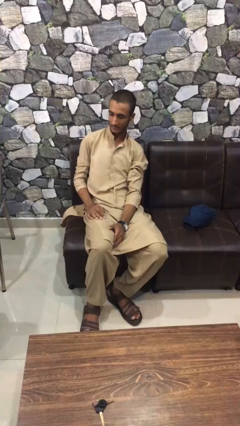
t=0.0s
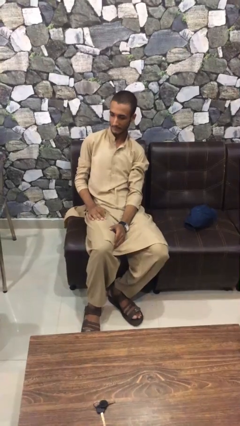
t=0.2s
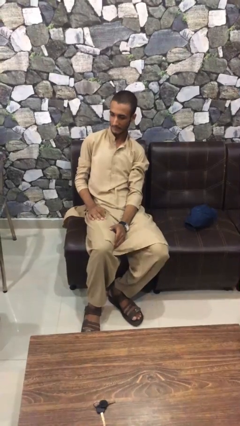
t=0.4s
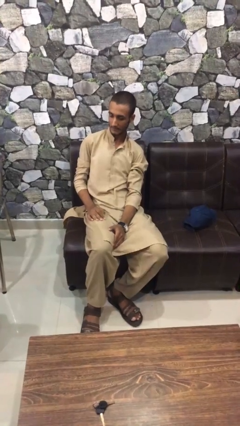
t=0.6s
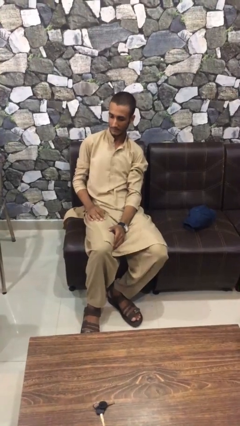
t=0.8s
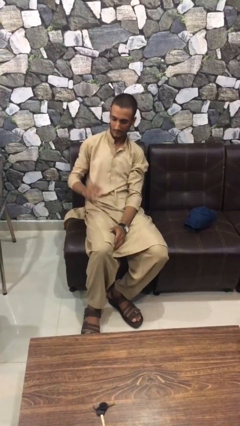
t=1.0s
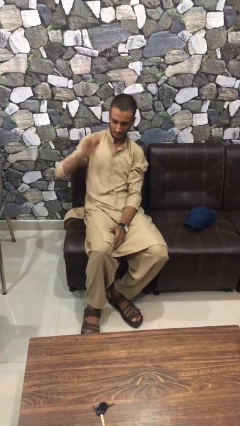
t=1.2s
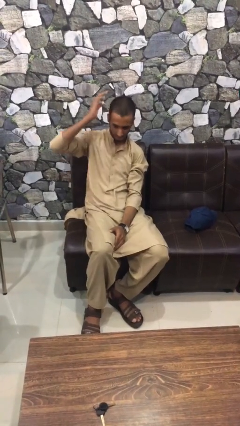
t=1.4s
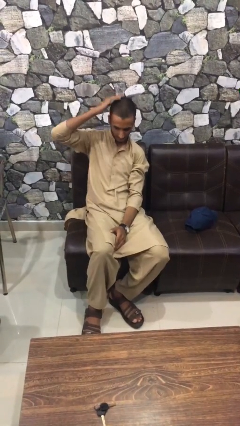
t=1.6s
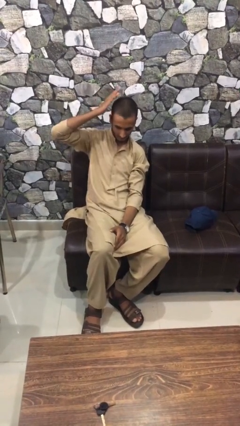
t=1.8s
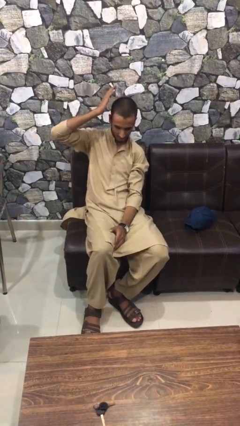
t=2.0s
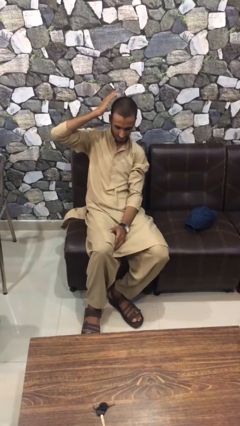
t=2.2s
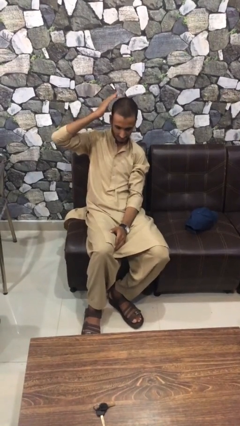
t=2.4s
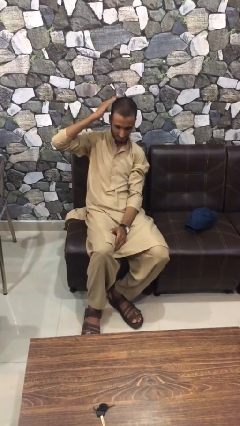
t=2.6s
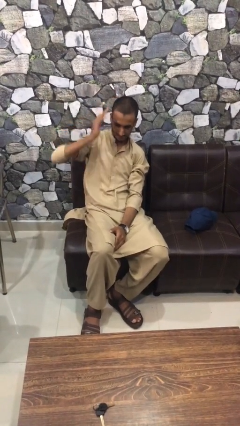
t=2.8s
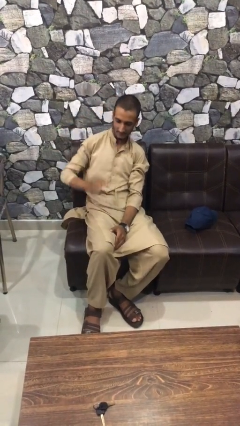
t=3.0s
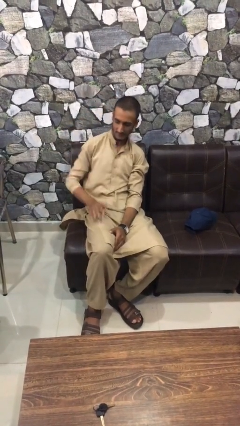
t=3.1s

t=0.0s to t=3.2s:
person pats head

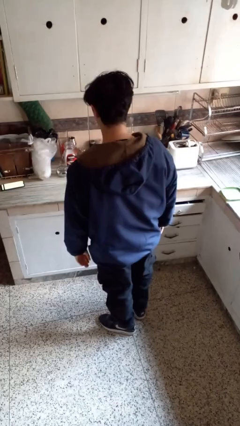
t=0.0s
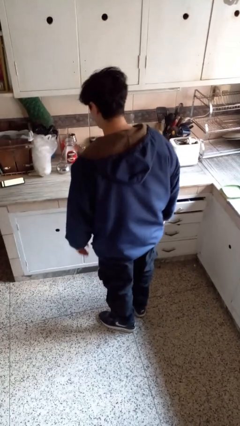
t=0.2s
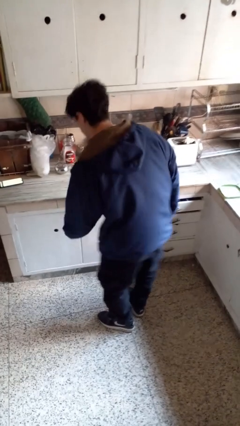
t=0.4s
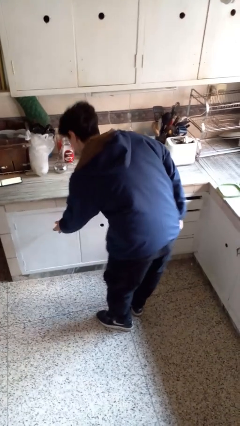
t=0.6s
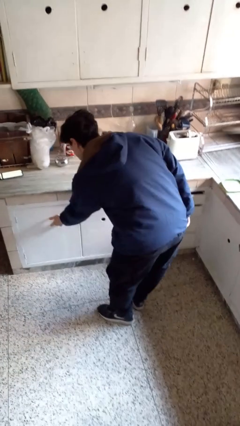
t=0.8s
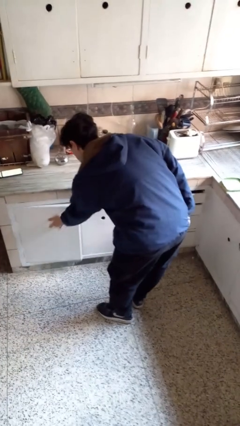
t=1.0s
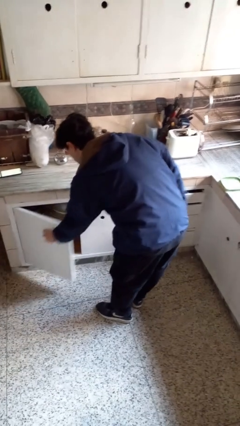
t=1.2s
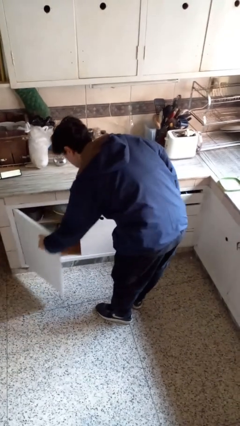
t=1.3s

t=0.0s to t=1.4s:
person opens cabinet

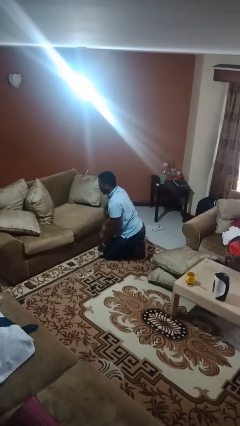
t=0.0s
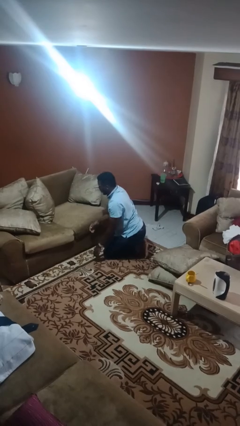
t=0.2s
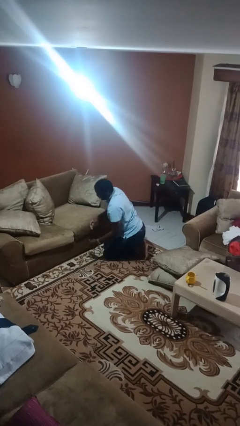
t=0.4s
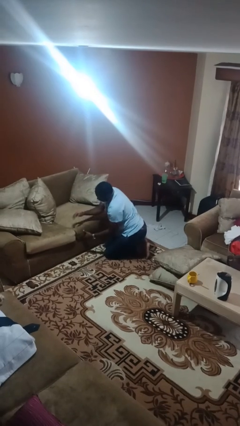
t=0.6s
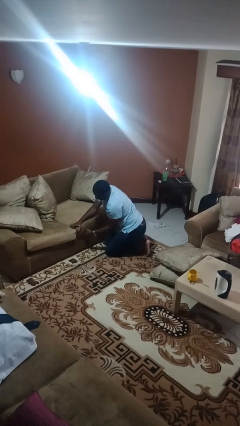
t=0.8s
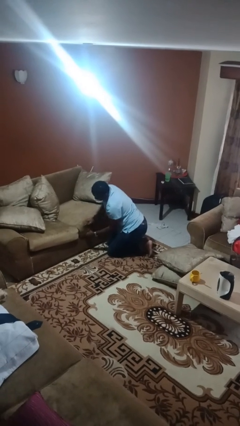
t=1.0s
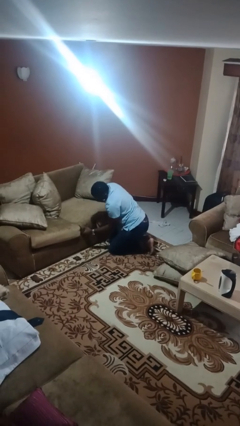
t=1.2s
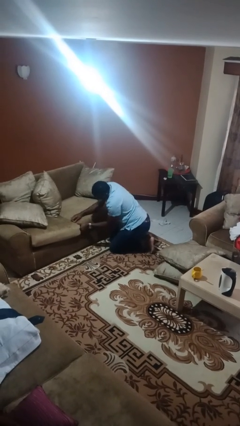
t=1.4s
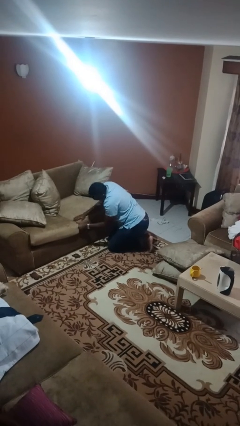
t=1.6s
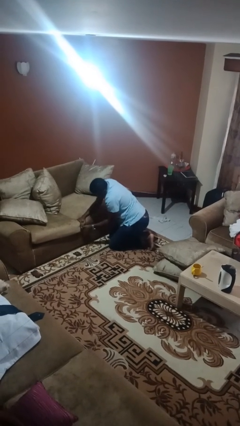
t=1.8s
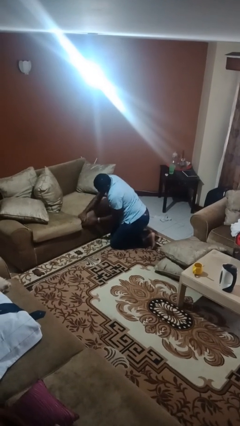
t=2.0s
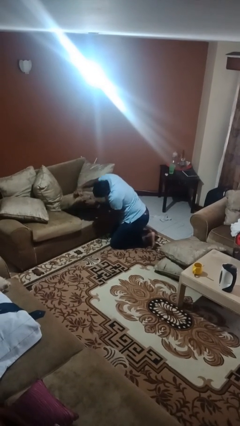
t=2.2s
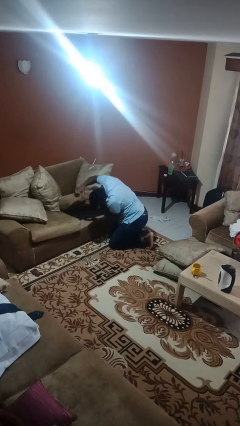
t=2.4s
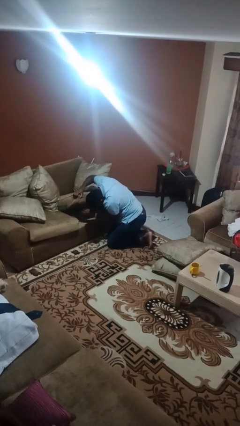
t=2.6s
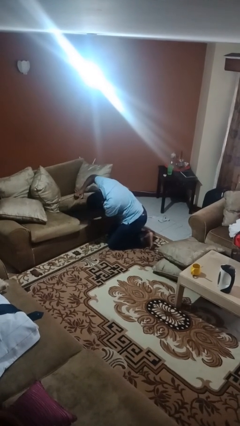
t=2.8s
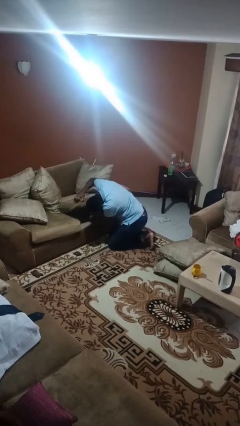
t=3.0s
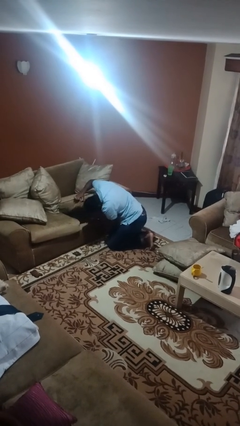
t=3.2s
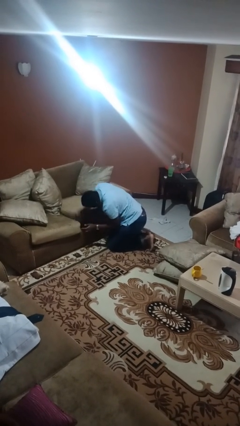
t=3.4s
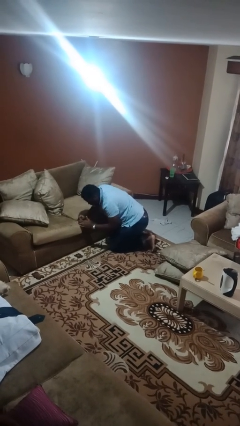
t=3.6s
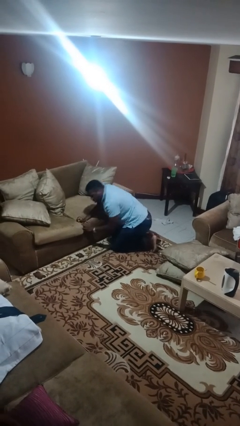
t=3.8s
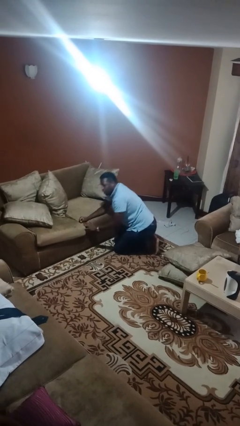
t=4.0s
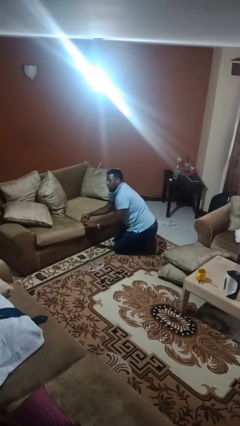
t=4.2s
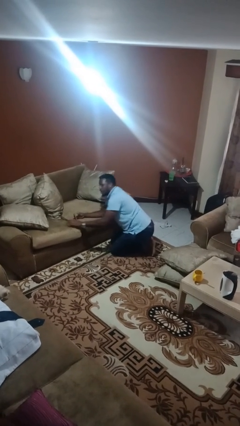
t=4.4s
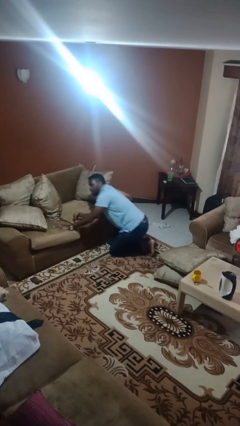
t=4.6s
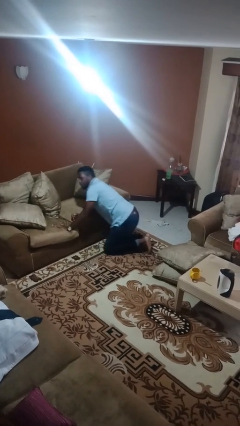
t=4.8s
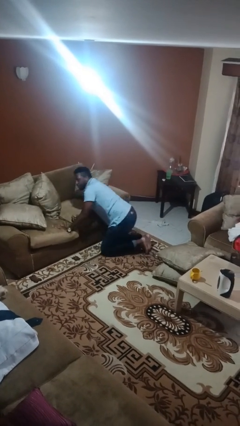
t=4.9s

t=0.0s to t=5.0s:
person searches under couch

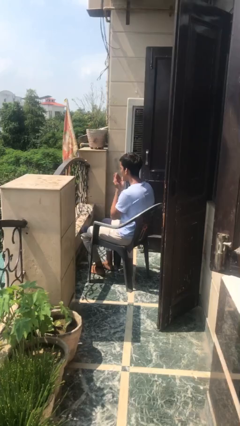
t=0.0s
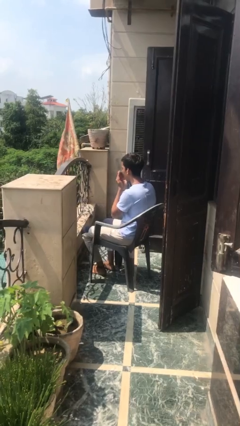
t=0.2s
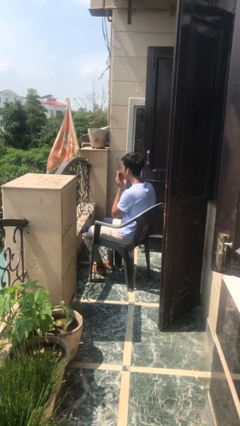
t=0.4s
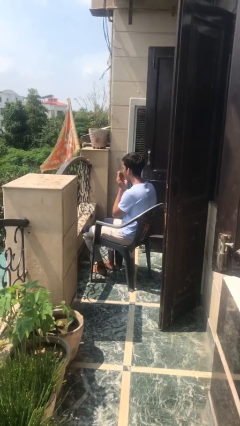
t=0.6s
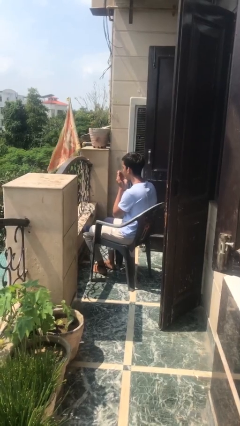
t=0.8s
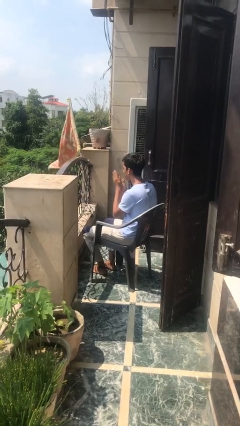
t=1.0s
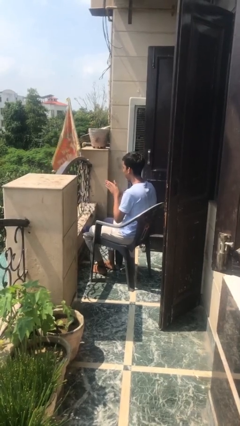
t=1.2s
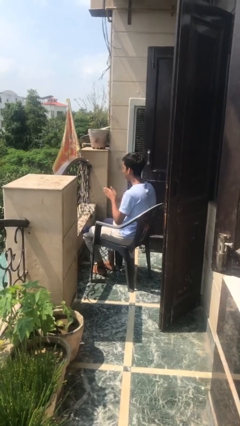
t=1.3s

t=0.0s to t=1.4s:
person blows into hands

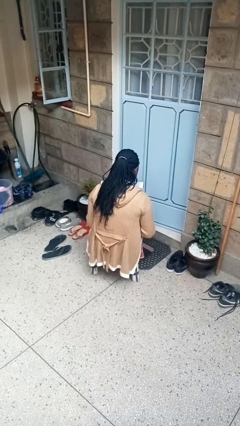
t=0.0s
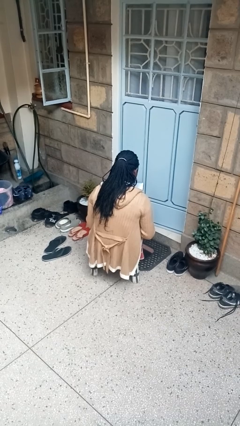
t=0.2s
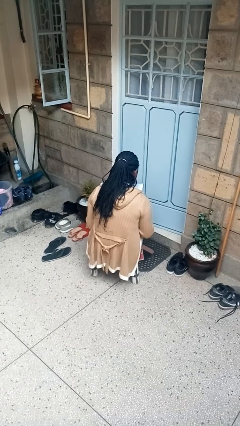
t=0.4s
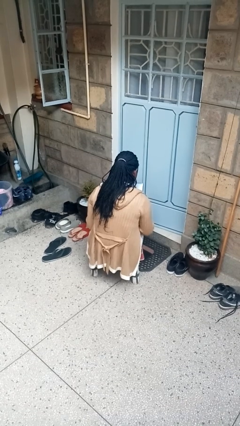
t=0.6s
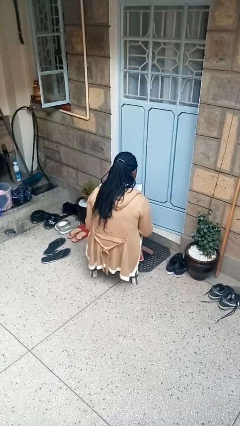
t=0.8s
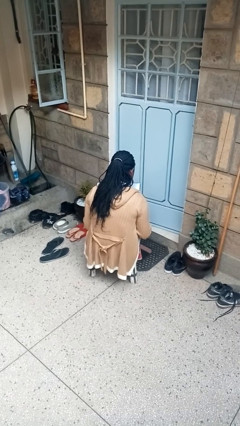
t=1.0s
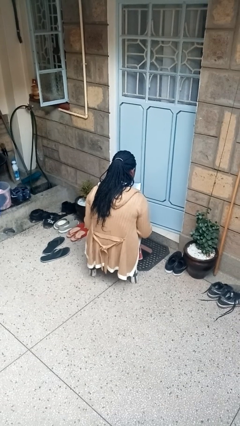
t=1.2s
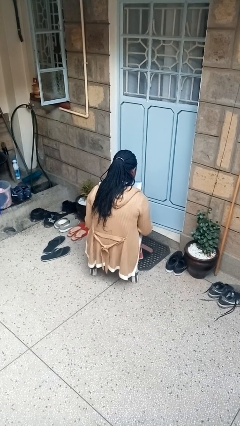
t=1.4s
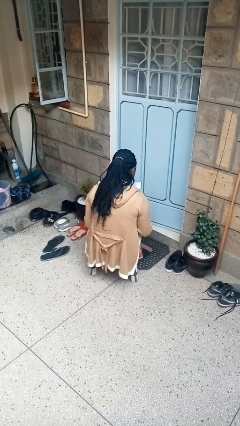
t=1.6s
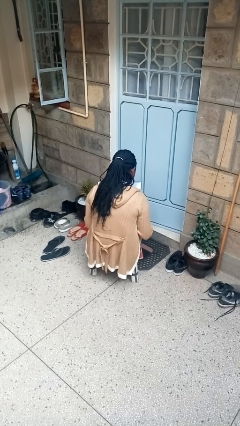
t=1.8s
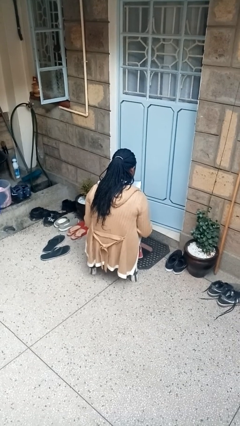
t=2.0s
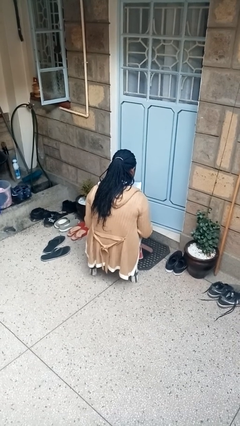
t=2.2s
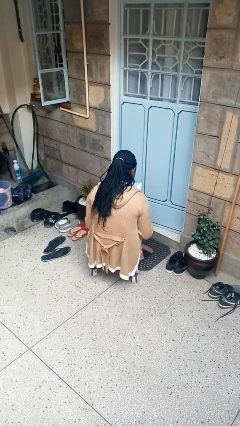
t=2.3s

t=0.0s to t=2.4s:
person interacts with tablet

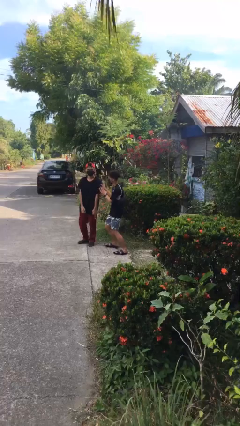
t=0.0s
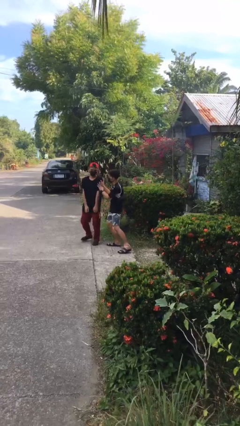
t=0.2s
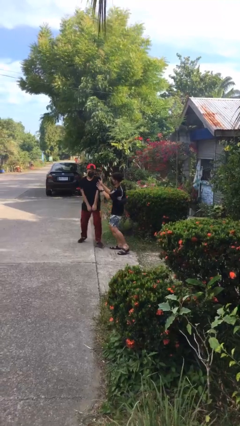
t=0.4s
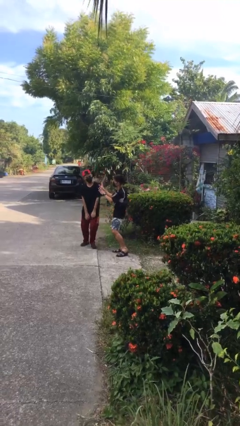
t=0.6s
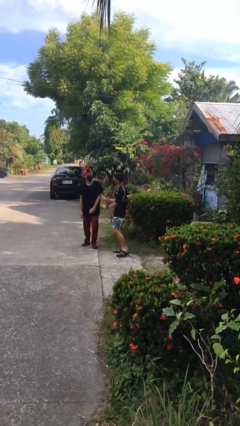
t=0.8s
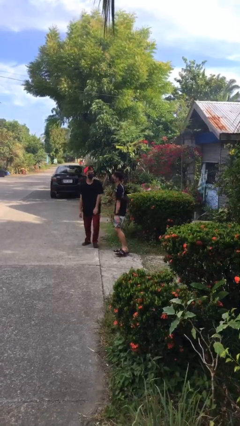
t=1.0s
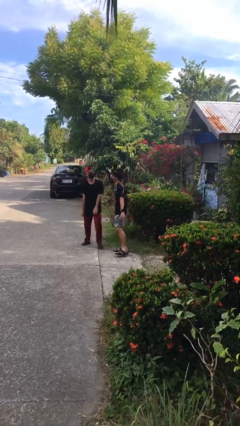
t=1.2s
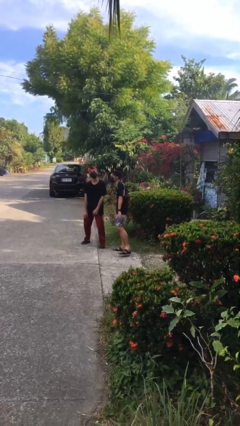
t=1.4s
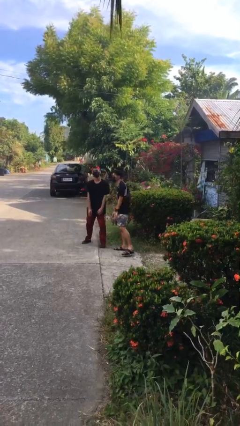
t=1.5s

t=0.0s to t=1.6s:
person shoves person

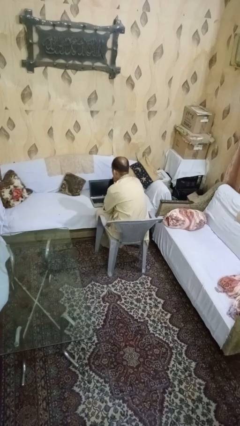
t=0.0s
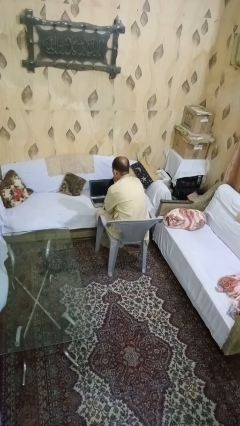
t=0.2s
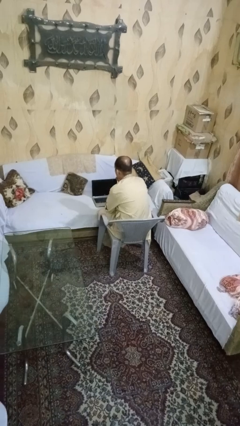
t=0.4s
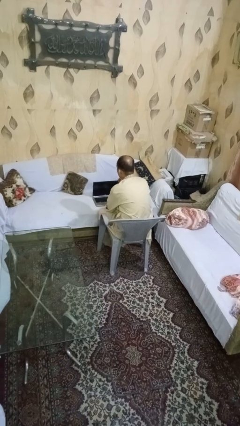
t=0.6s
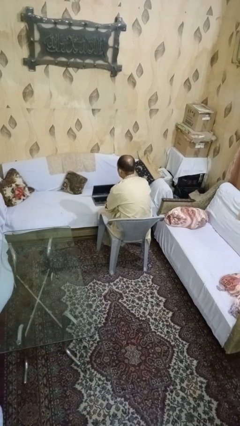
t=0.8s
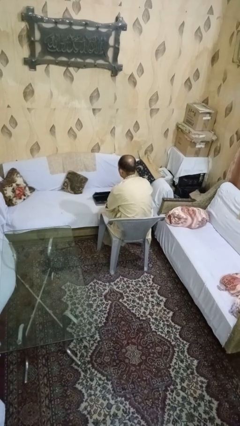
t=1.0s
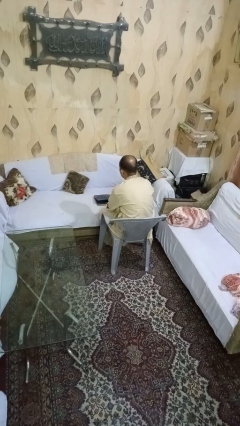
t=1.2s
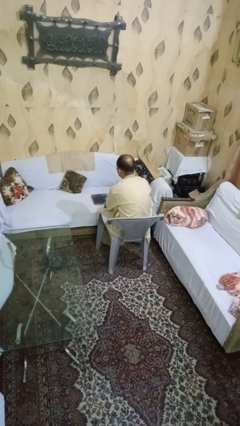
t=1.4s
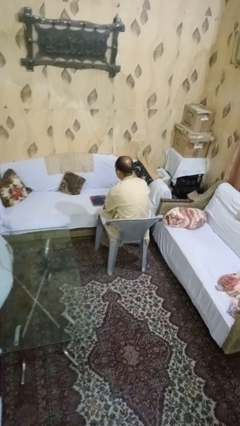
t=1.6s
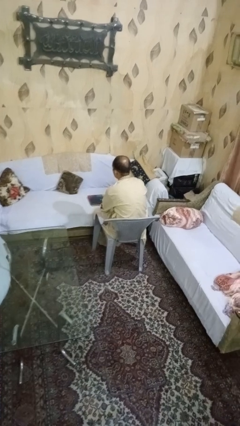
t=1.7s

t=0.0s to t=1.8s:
person closes laptop

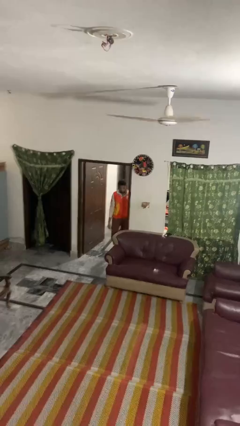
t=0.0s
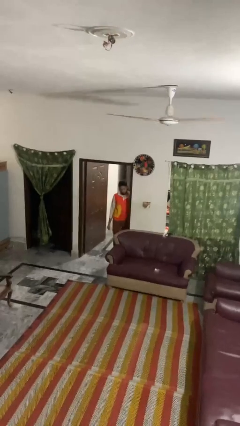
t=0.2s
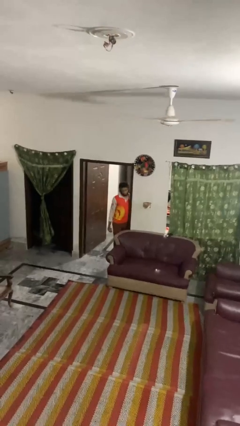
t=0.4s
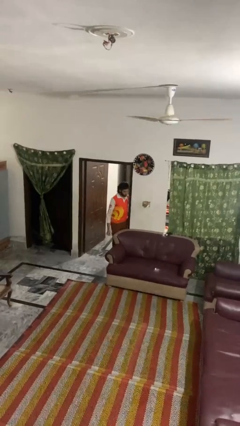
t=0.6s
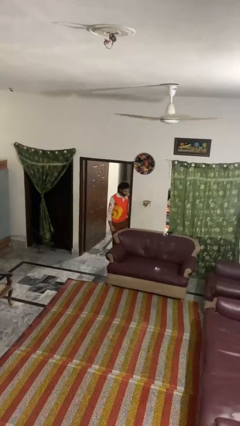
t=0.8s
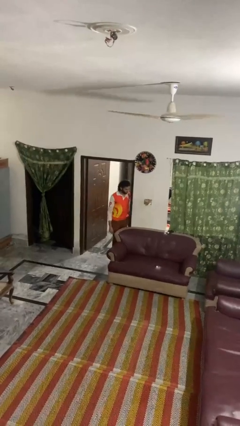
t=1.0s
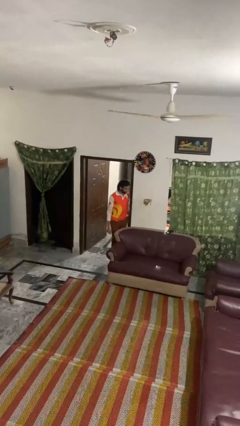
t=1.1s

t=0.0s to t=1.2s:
person bumps into wall
